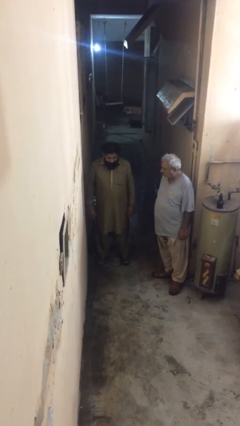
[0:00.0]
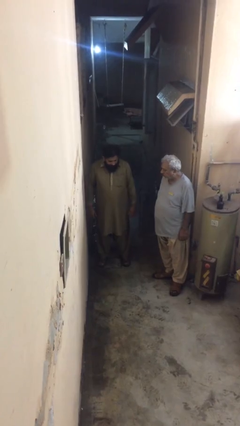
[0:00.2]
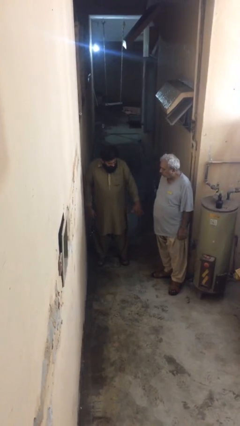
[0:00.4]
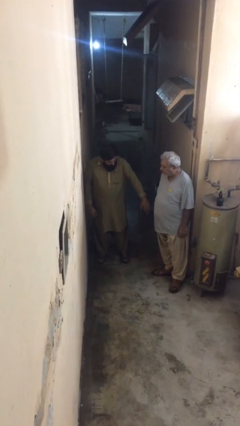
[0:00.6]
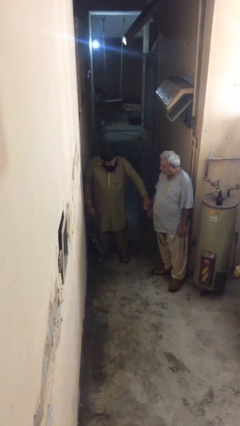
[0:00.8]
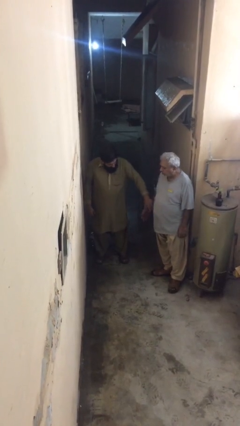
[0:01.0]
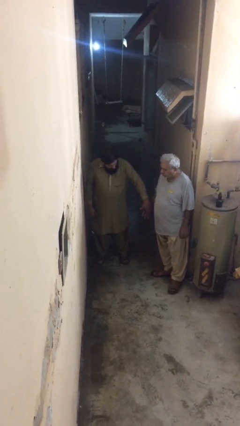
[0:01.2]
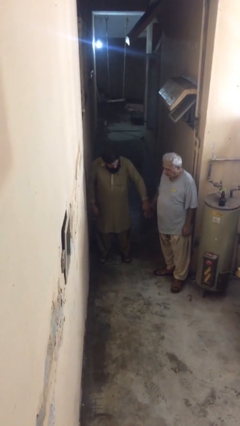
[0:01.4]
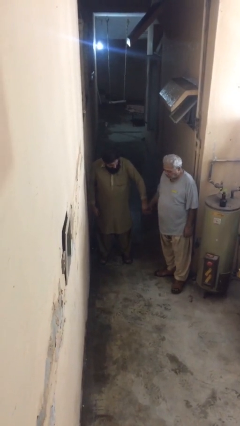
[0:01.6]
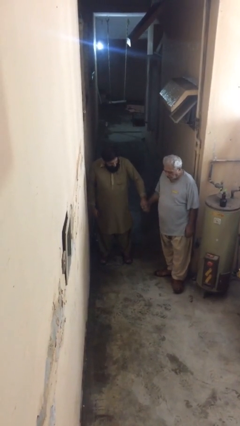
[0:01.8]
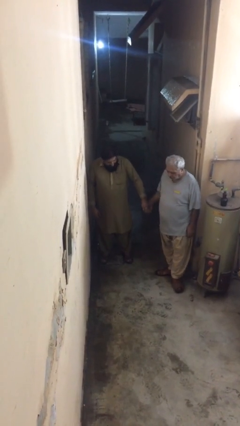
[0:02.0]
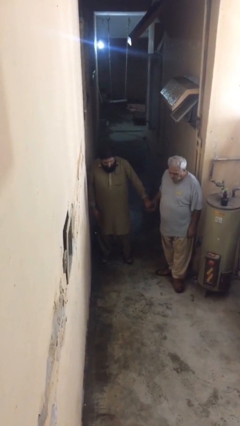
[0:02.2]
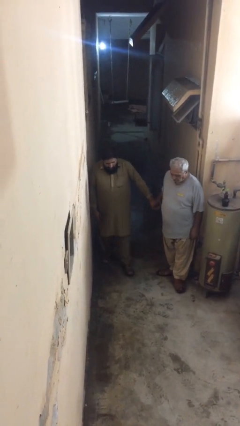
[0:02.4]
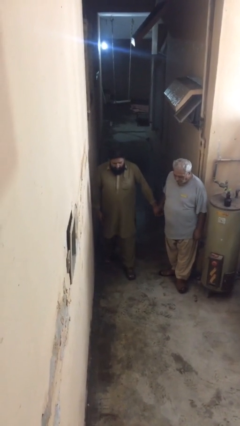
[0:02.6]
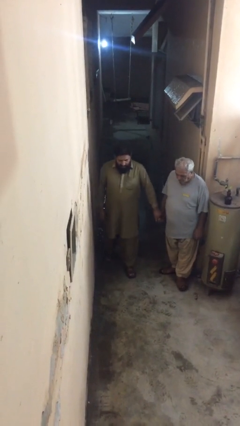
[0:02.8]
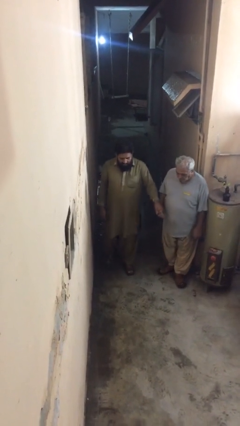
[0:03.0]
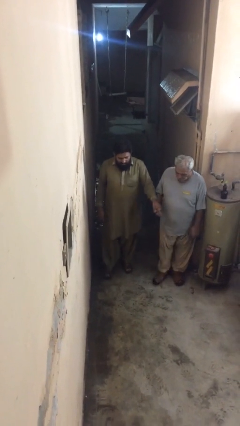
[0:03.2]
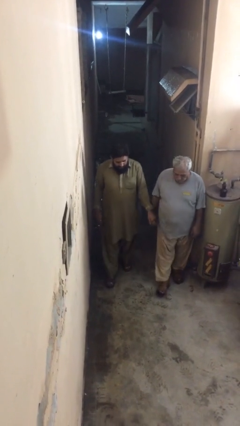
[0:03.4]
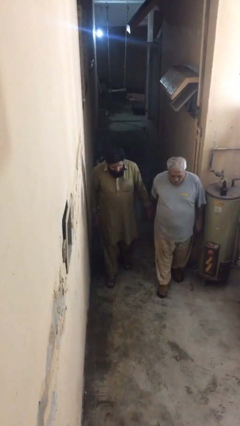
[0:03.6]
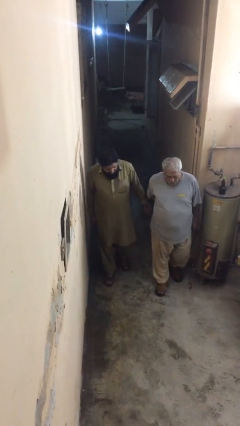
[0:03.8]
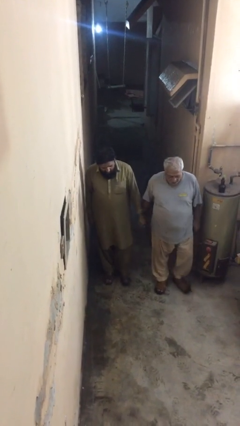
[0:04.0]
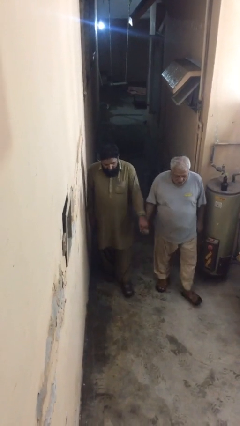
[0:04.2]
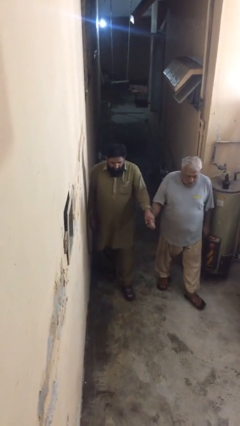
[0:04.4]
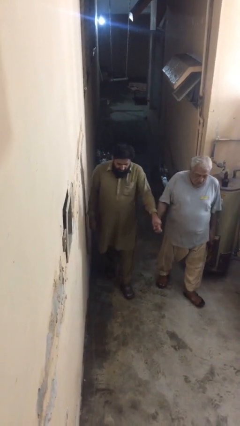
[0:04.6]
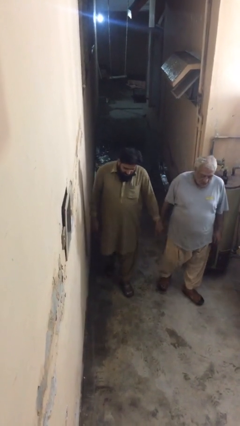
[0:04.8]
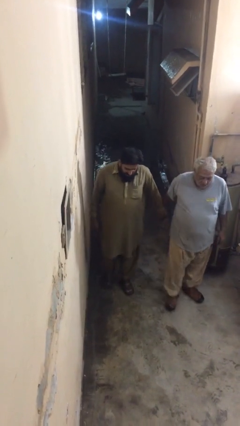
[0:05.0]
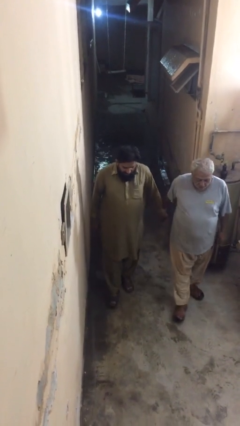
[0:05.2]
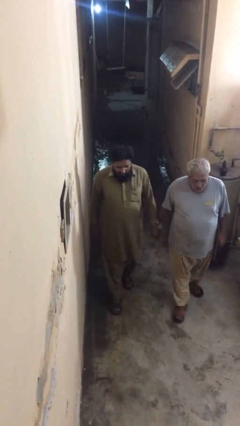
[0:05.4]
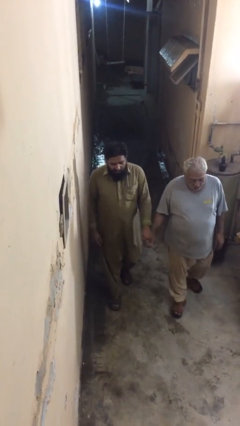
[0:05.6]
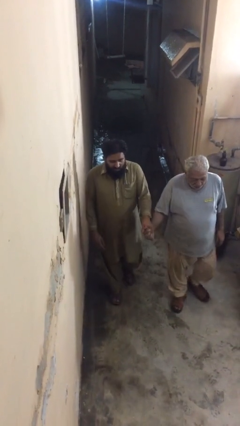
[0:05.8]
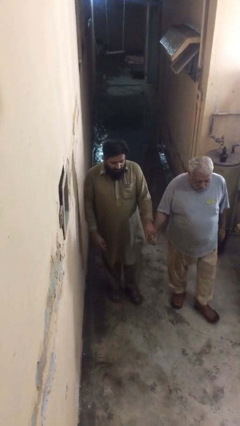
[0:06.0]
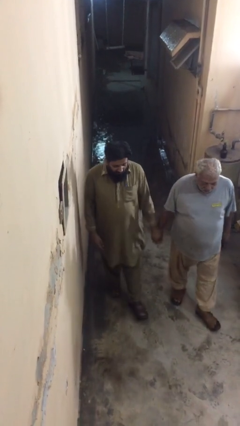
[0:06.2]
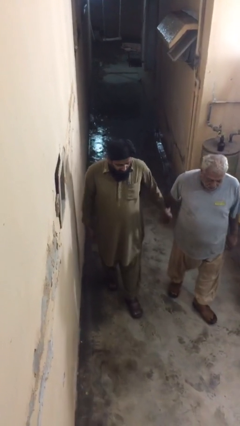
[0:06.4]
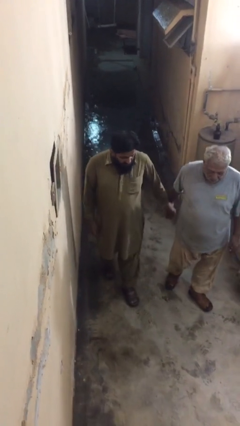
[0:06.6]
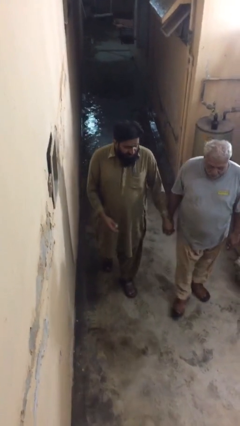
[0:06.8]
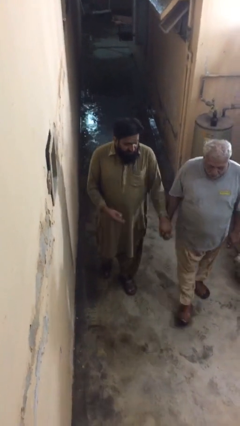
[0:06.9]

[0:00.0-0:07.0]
person holds hand

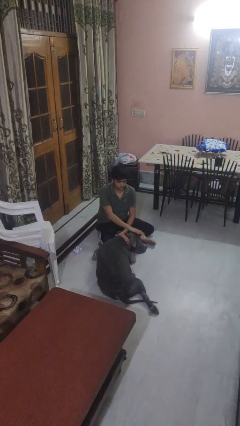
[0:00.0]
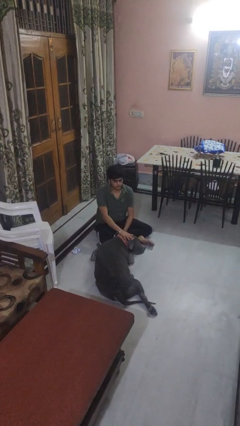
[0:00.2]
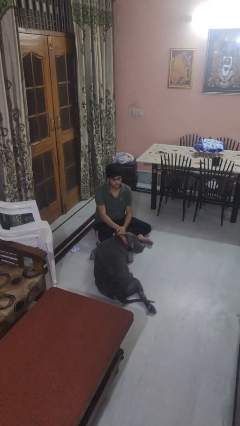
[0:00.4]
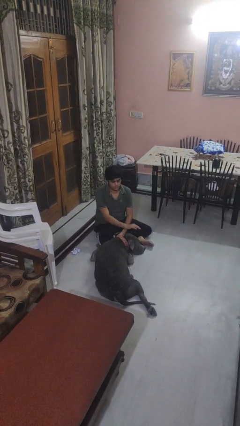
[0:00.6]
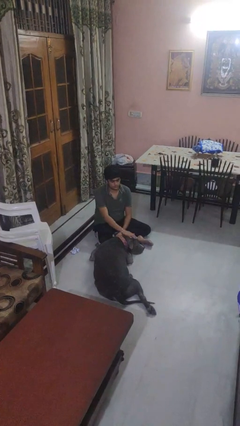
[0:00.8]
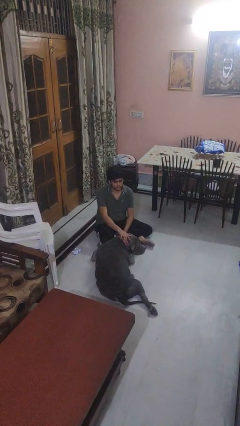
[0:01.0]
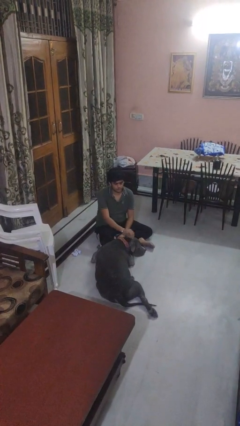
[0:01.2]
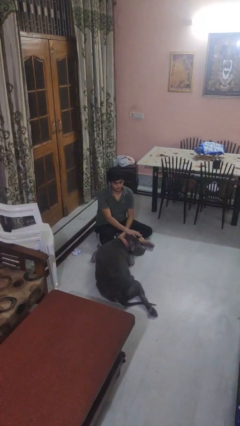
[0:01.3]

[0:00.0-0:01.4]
person pets dog

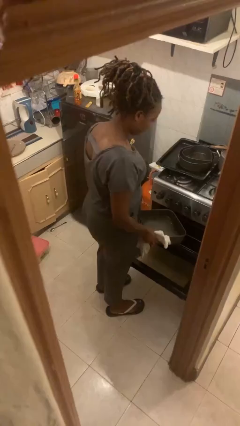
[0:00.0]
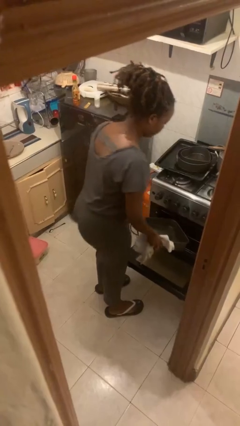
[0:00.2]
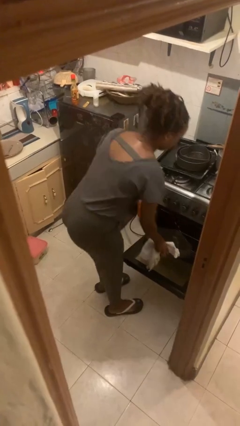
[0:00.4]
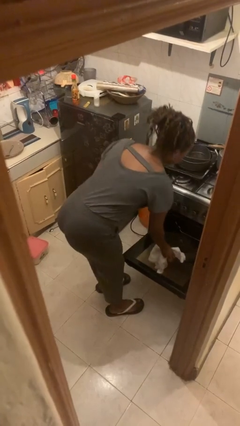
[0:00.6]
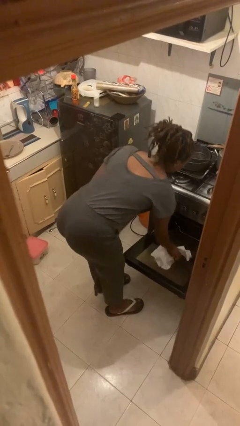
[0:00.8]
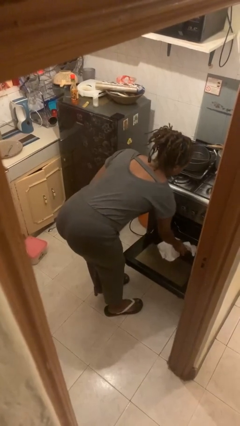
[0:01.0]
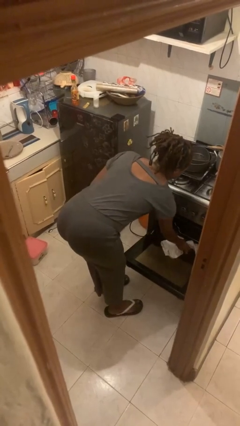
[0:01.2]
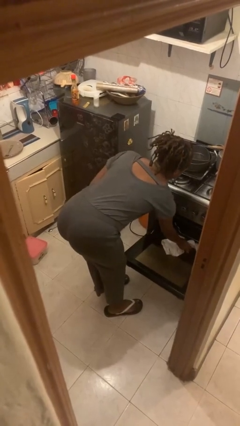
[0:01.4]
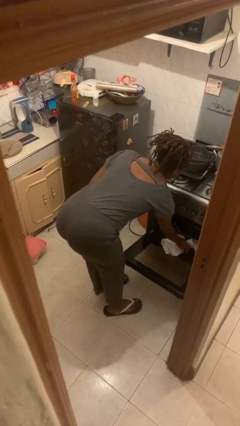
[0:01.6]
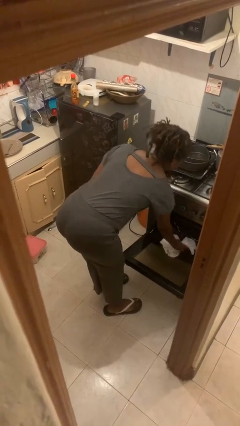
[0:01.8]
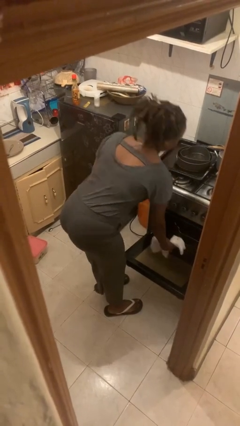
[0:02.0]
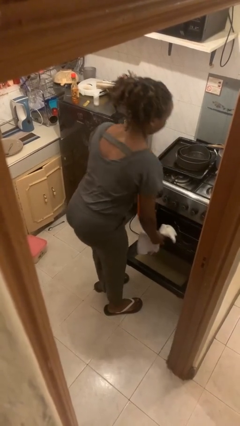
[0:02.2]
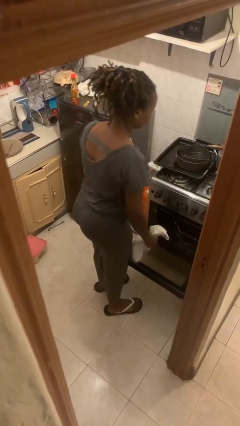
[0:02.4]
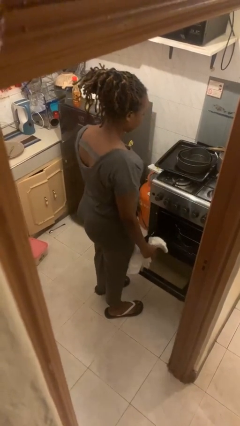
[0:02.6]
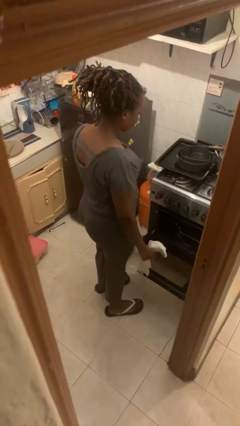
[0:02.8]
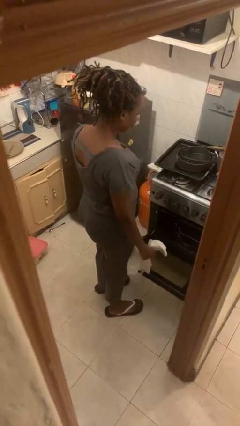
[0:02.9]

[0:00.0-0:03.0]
person puts object into oven

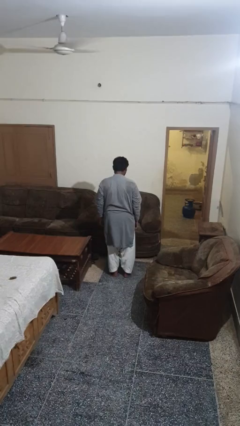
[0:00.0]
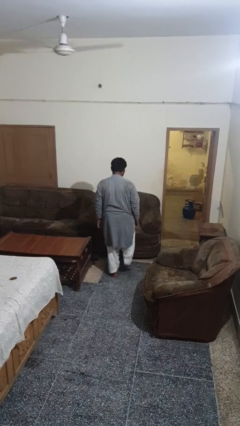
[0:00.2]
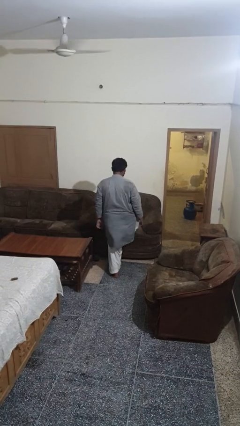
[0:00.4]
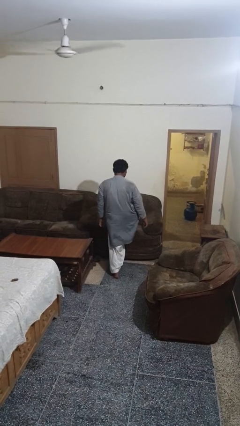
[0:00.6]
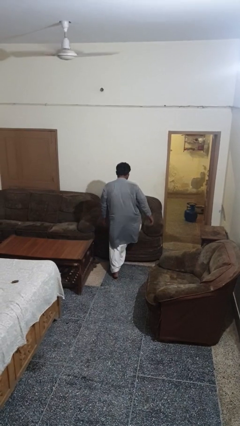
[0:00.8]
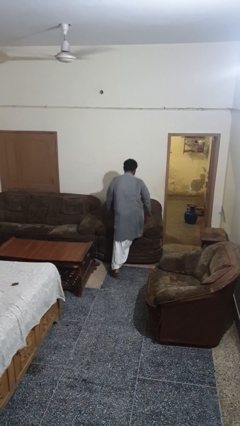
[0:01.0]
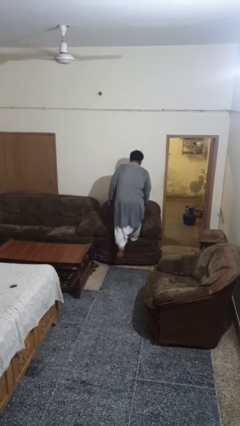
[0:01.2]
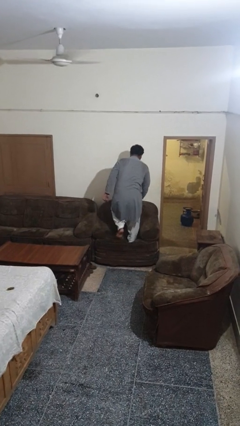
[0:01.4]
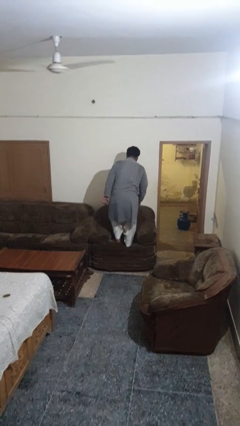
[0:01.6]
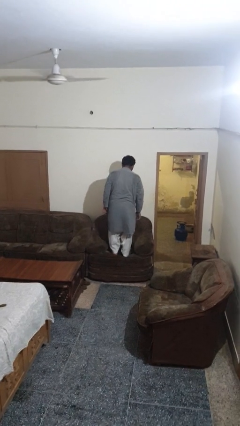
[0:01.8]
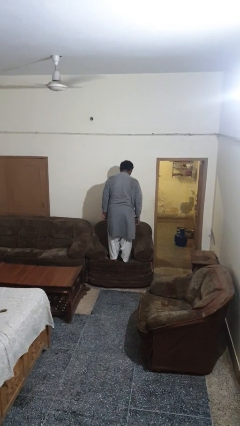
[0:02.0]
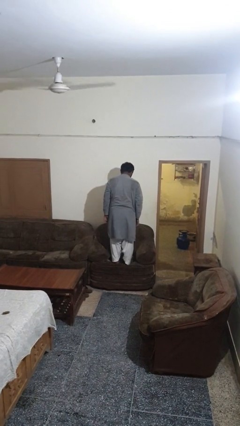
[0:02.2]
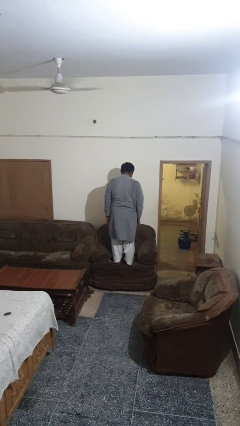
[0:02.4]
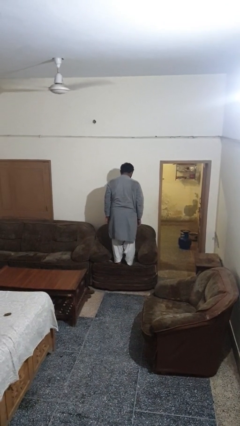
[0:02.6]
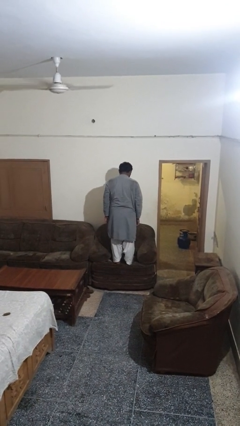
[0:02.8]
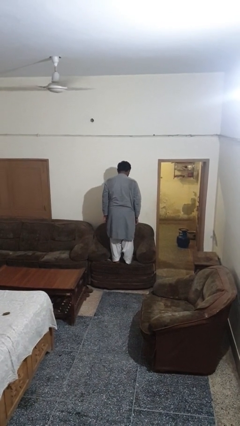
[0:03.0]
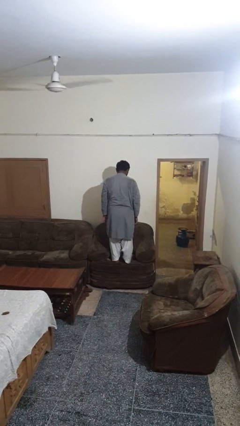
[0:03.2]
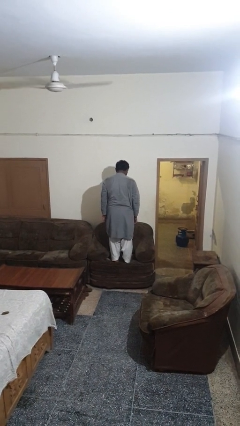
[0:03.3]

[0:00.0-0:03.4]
person climbs on couch

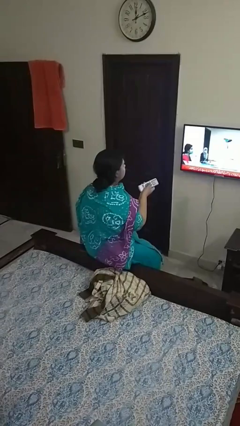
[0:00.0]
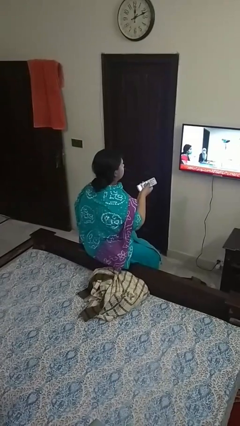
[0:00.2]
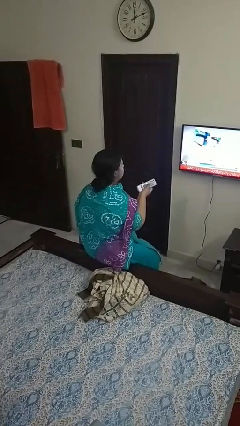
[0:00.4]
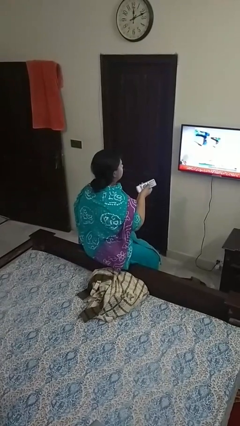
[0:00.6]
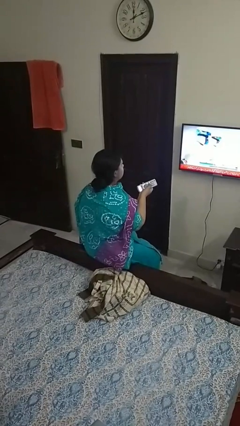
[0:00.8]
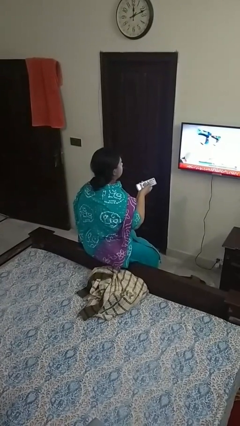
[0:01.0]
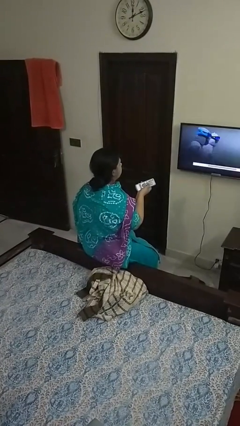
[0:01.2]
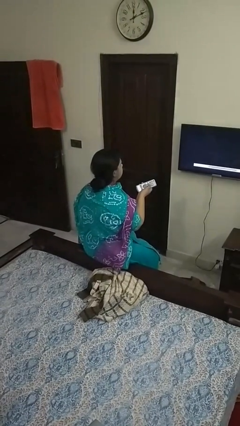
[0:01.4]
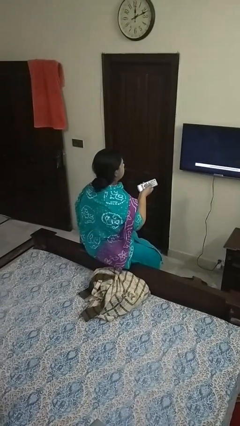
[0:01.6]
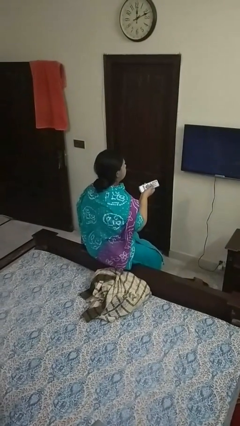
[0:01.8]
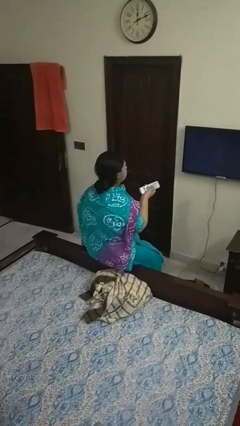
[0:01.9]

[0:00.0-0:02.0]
person uses television remote

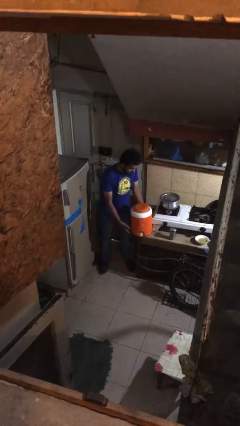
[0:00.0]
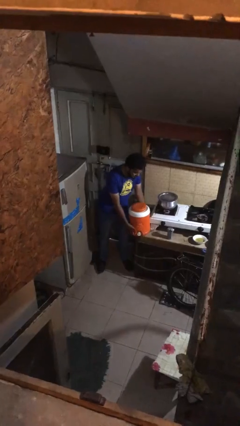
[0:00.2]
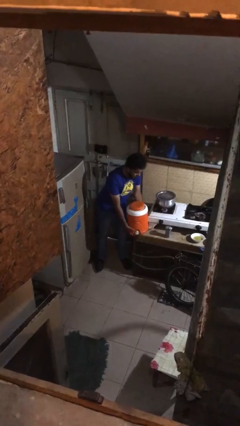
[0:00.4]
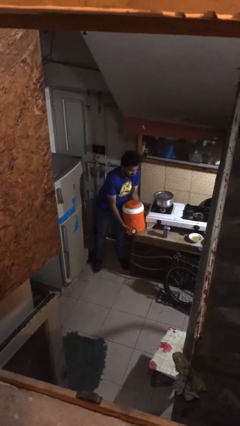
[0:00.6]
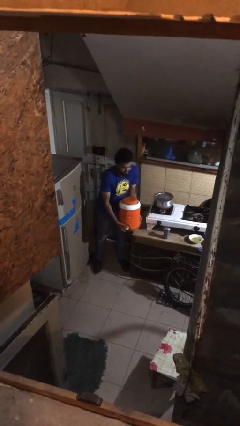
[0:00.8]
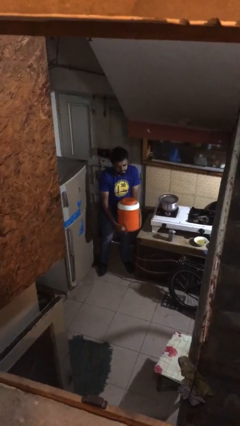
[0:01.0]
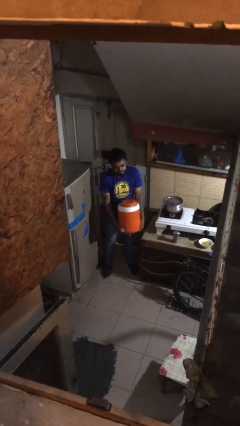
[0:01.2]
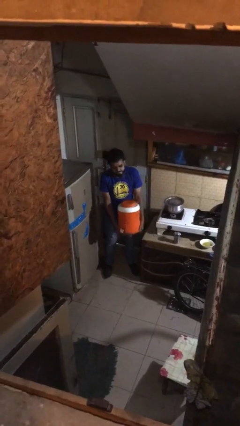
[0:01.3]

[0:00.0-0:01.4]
person picks up object from floor
